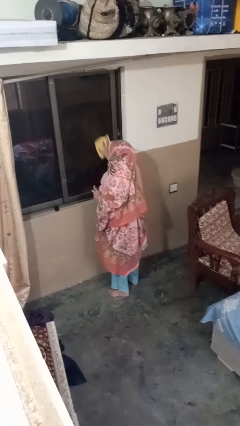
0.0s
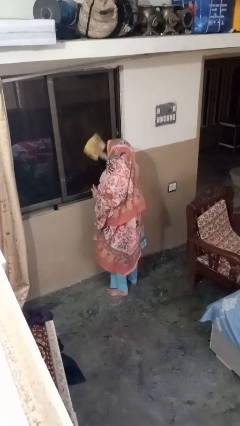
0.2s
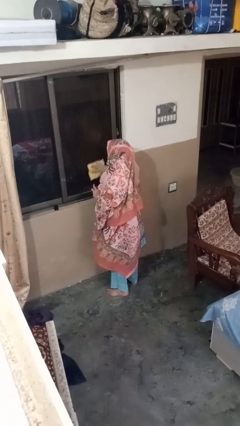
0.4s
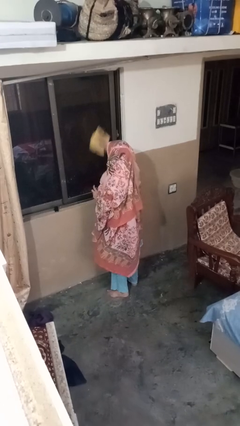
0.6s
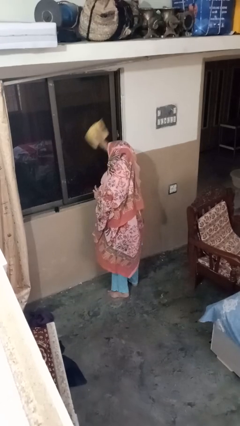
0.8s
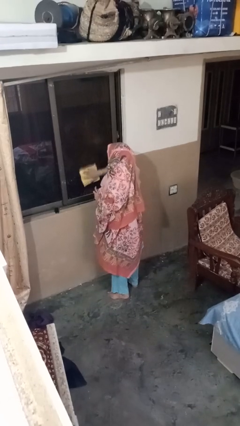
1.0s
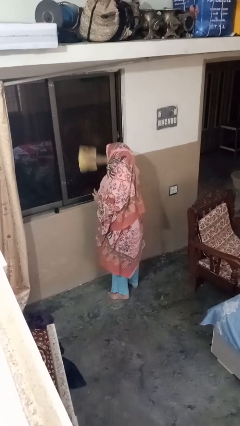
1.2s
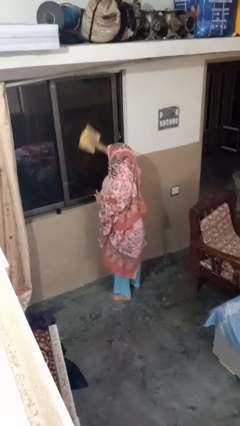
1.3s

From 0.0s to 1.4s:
person washes window

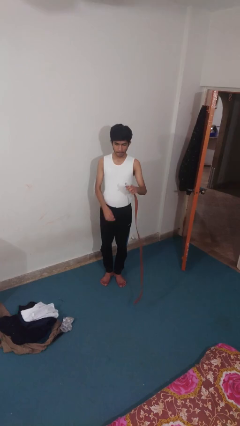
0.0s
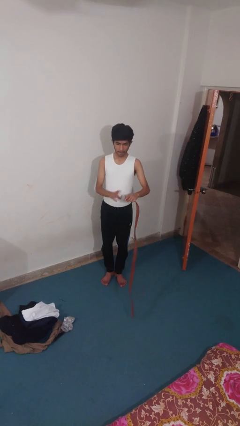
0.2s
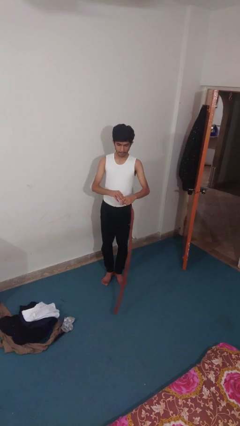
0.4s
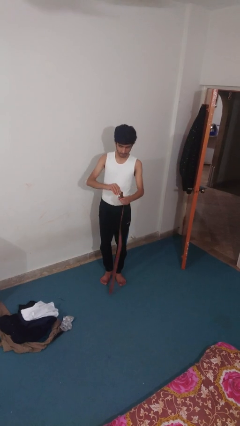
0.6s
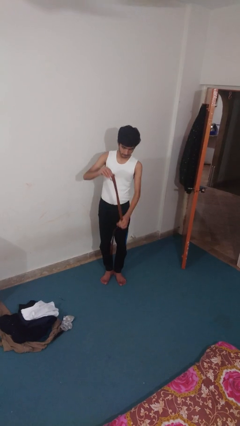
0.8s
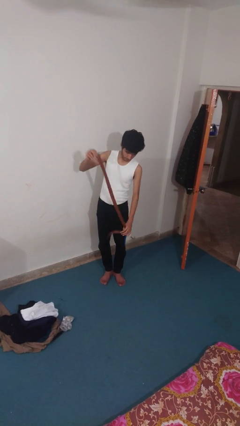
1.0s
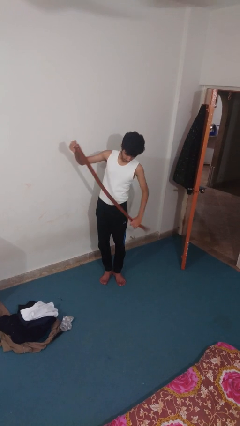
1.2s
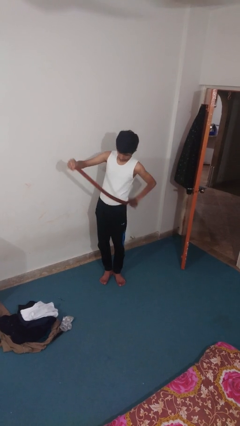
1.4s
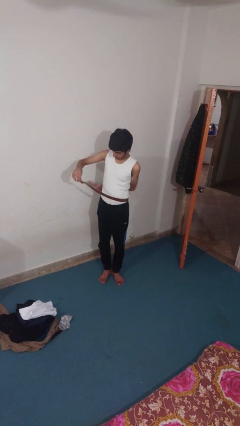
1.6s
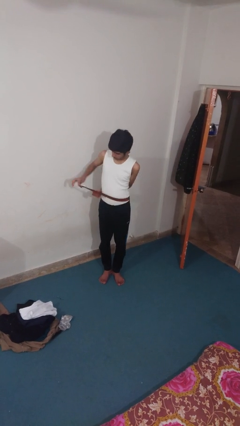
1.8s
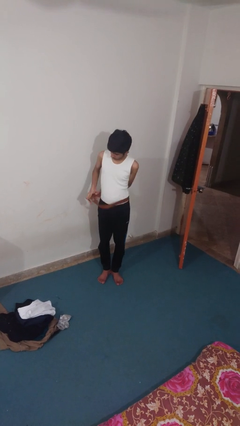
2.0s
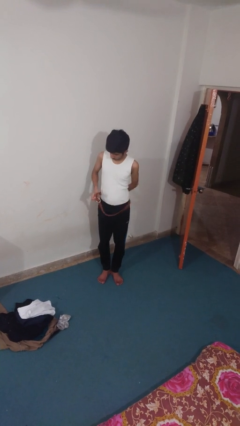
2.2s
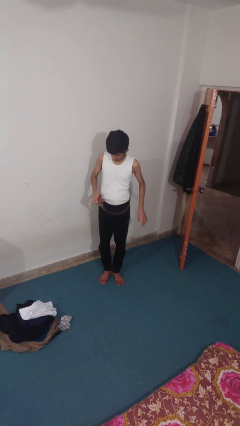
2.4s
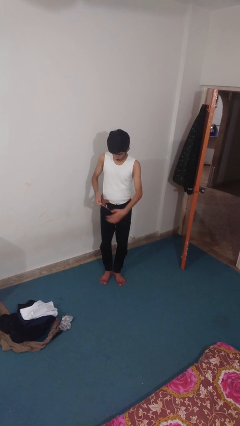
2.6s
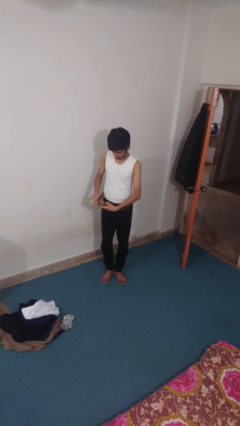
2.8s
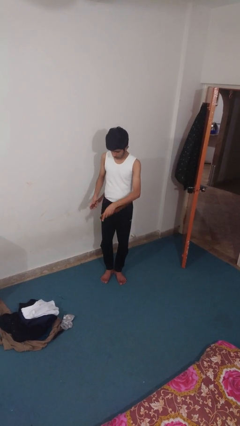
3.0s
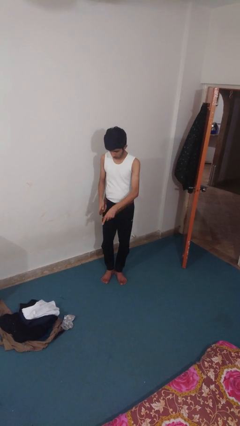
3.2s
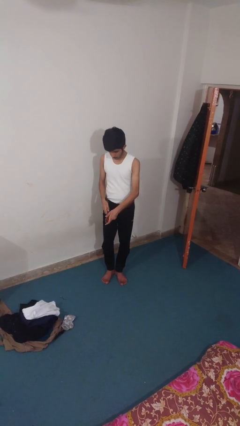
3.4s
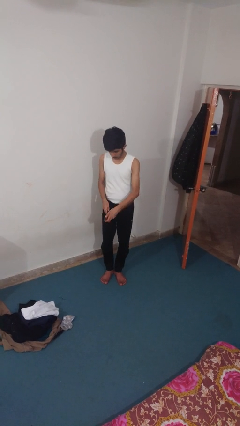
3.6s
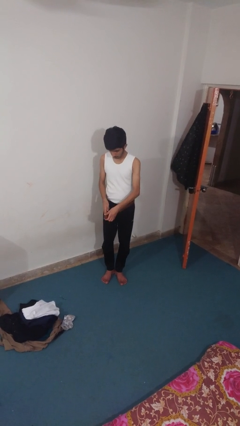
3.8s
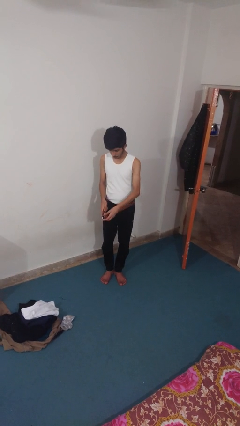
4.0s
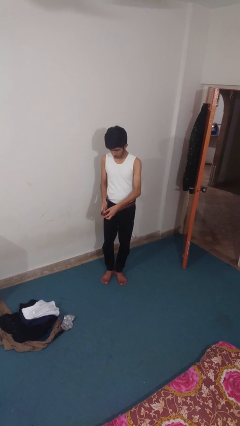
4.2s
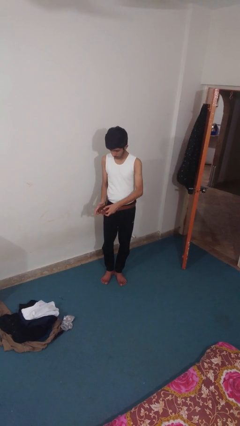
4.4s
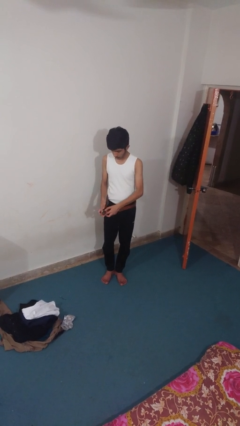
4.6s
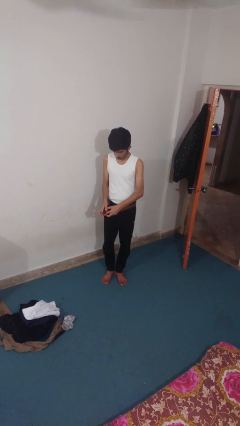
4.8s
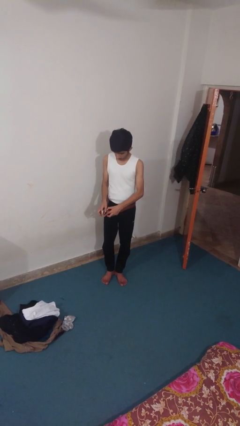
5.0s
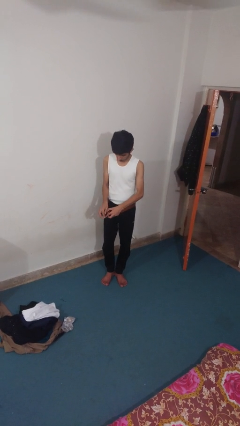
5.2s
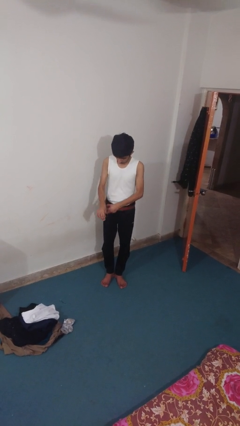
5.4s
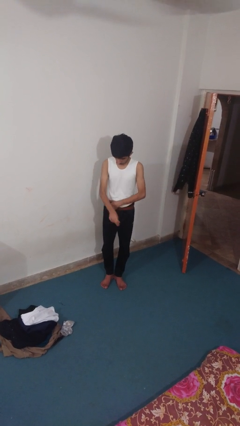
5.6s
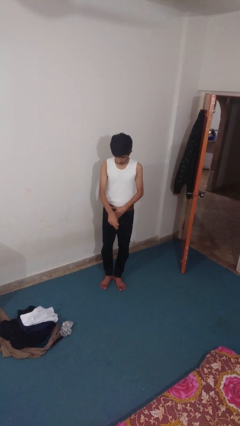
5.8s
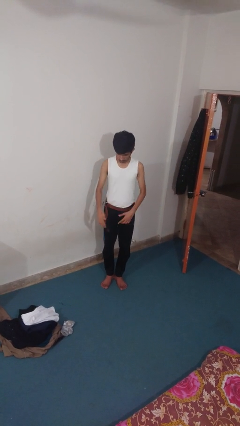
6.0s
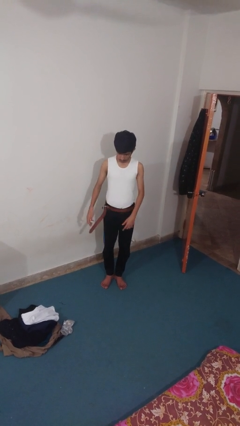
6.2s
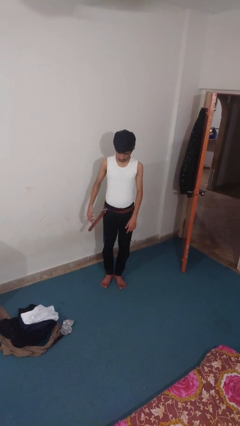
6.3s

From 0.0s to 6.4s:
person puts on belt

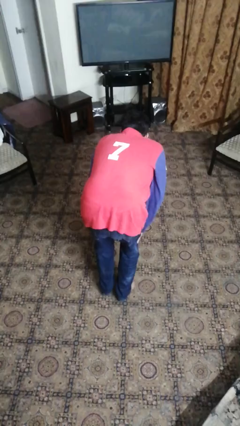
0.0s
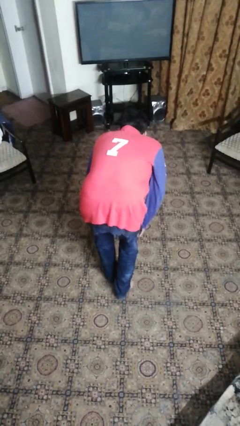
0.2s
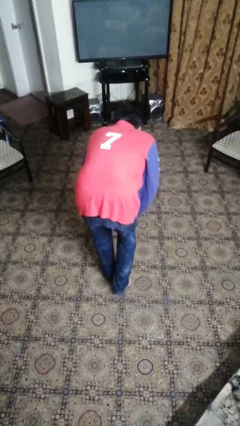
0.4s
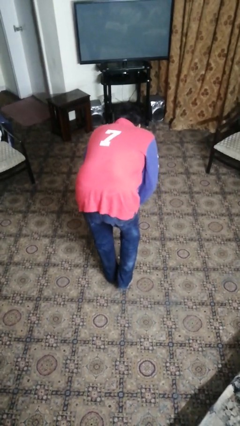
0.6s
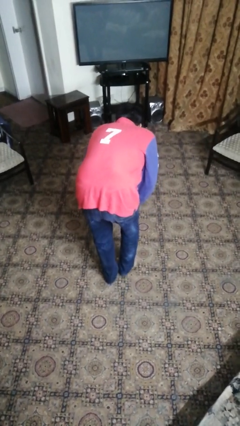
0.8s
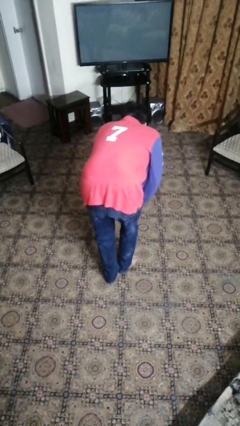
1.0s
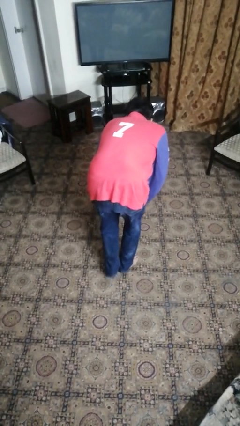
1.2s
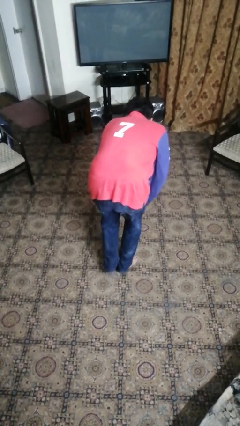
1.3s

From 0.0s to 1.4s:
person walks tiptoe

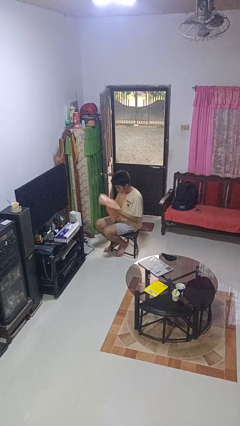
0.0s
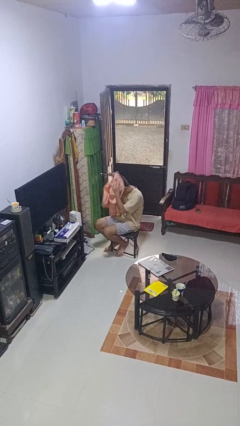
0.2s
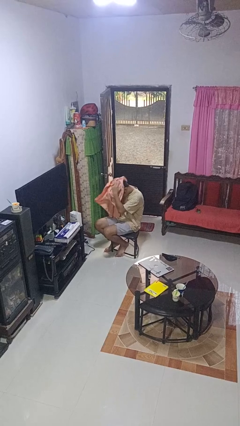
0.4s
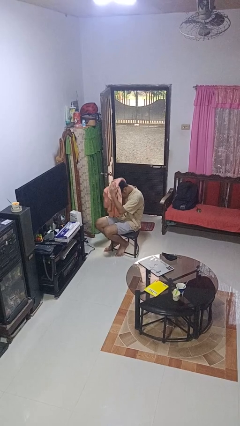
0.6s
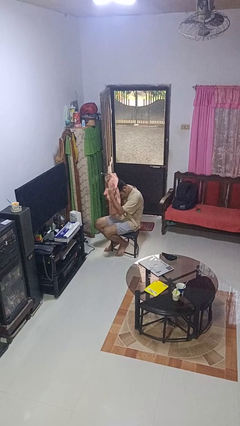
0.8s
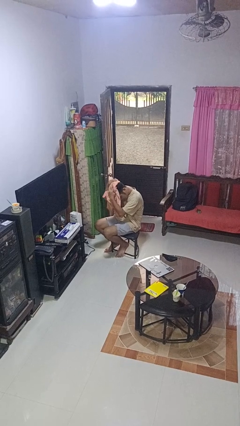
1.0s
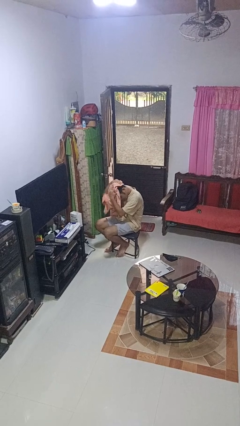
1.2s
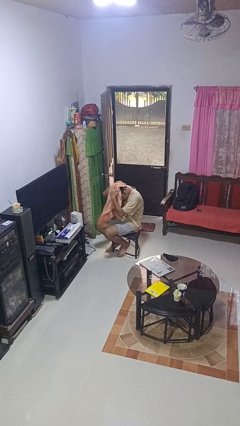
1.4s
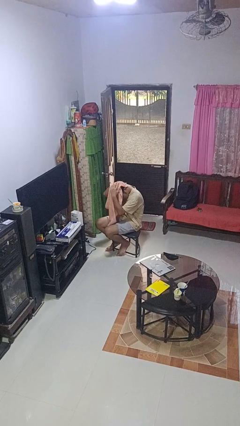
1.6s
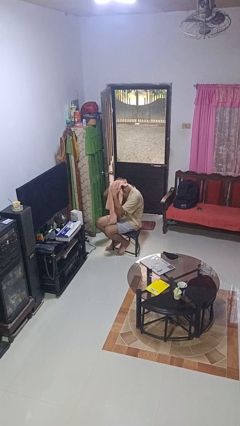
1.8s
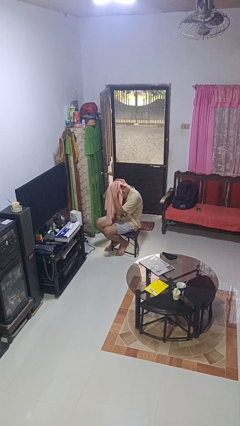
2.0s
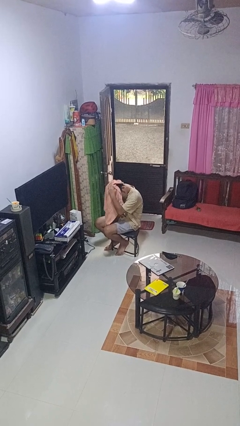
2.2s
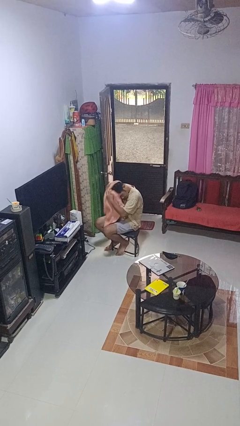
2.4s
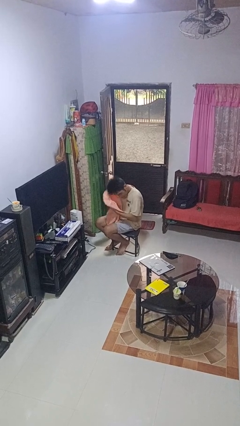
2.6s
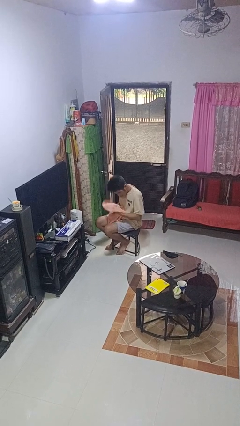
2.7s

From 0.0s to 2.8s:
person dries hair with towel

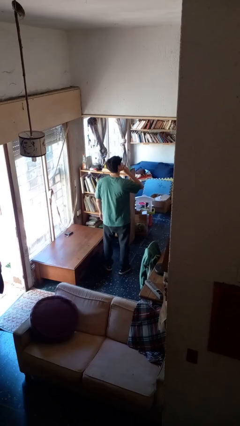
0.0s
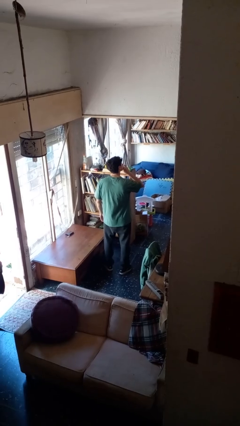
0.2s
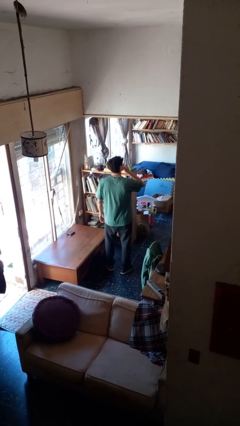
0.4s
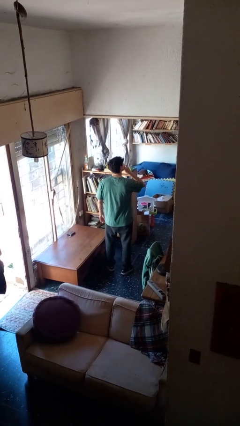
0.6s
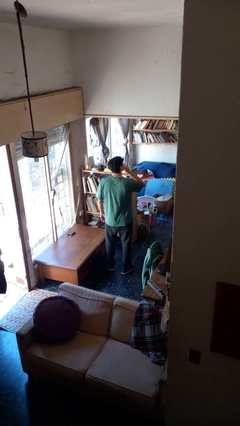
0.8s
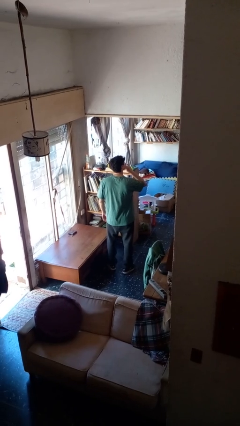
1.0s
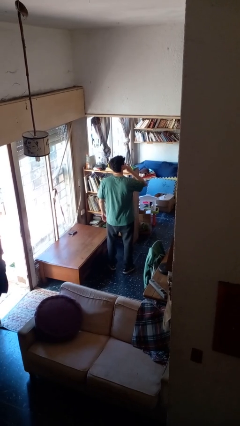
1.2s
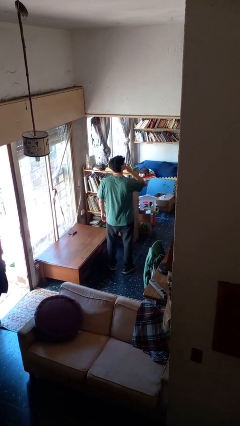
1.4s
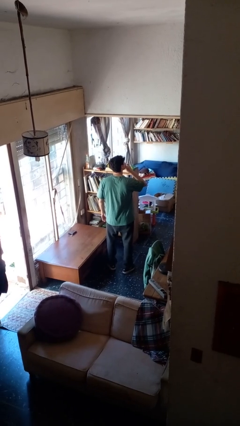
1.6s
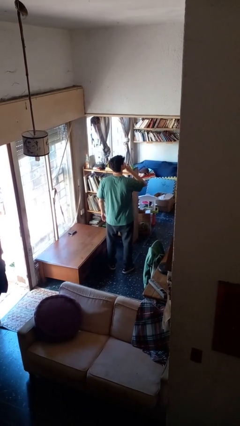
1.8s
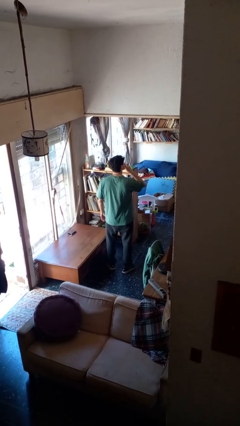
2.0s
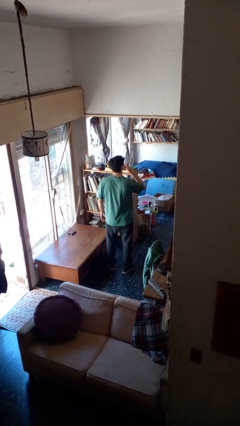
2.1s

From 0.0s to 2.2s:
person gestures be quiet

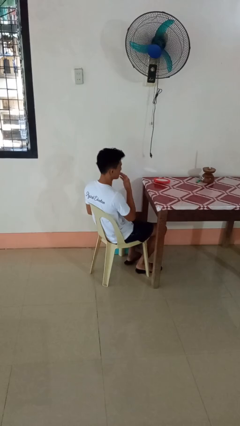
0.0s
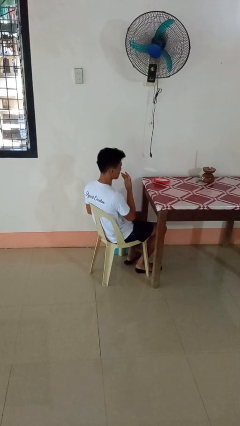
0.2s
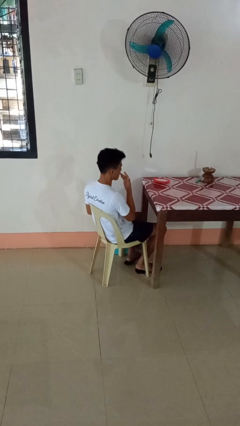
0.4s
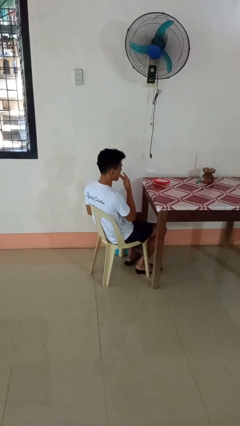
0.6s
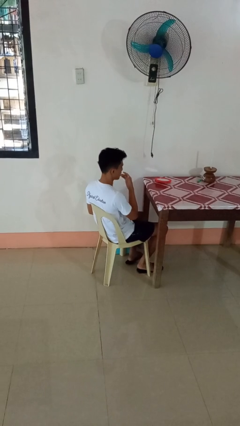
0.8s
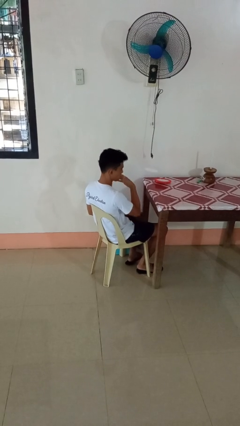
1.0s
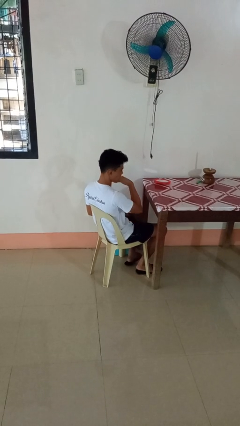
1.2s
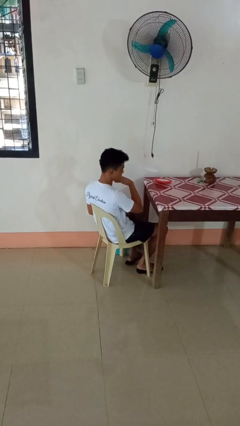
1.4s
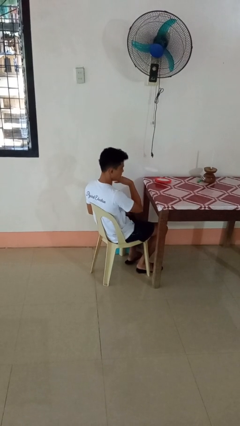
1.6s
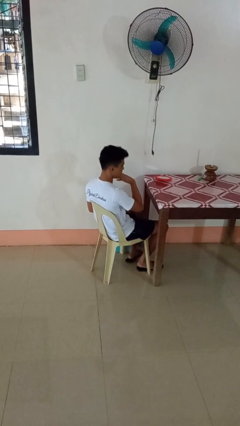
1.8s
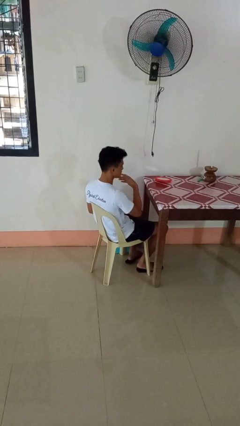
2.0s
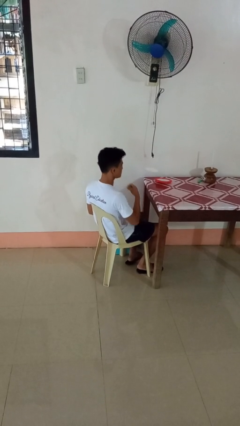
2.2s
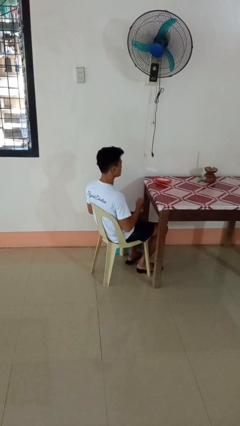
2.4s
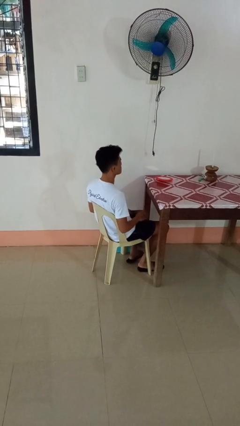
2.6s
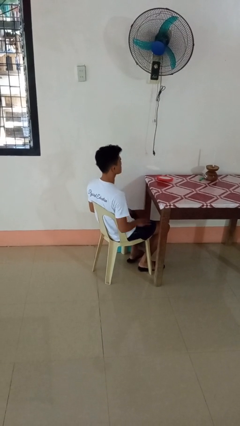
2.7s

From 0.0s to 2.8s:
person licks fingers

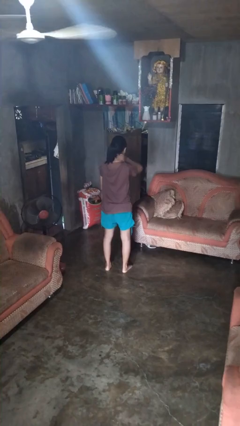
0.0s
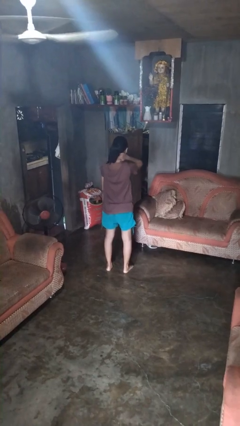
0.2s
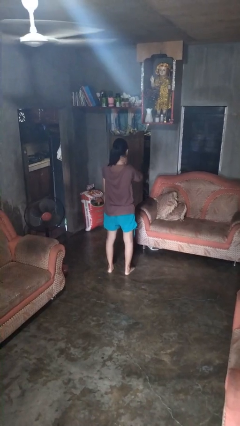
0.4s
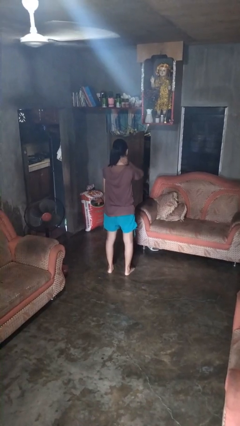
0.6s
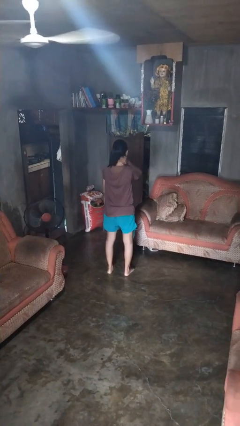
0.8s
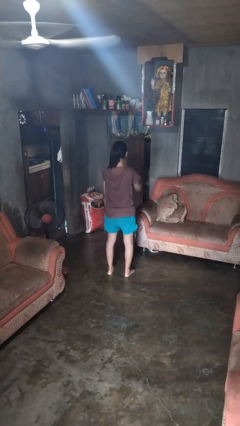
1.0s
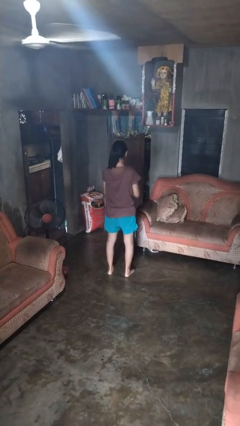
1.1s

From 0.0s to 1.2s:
person rubs neck
